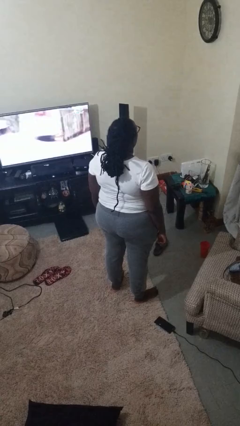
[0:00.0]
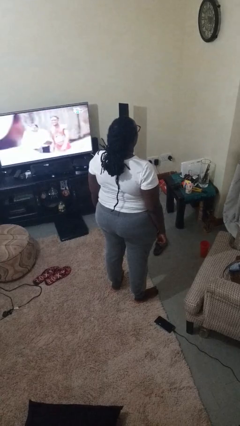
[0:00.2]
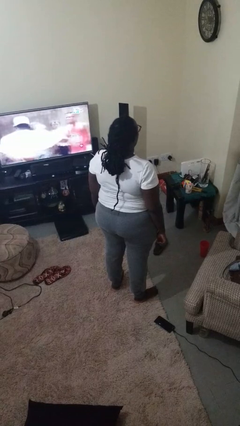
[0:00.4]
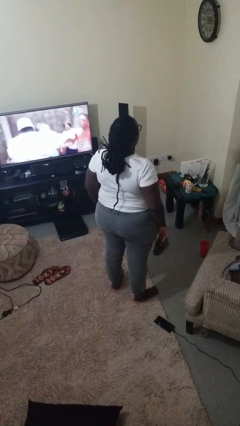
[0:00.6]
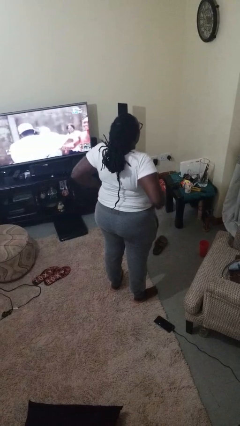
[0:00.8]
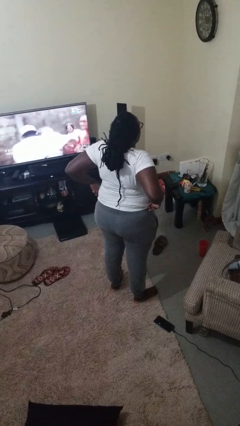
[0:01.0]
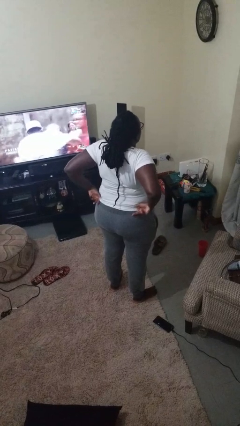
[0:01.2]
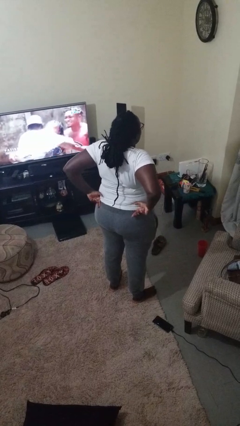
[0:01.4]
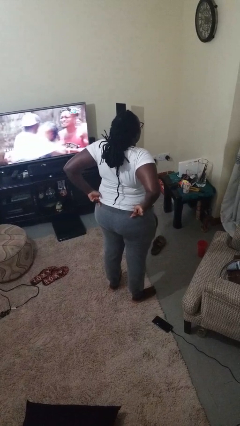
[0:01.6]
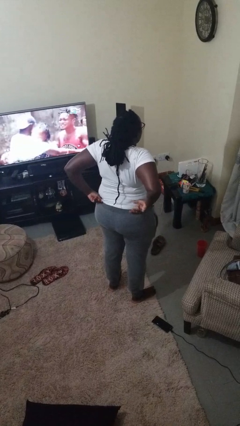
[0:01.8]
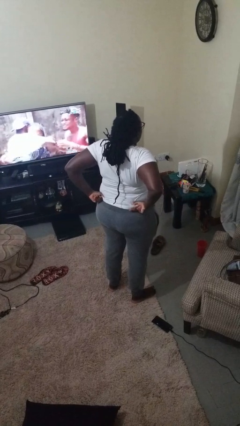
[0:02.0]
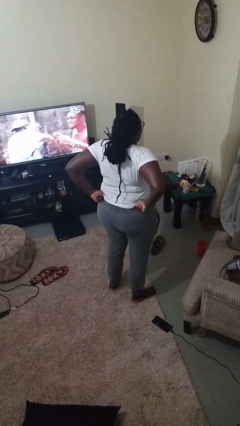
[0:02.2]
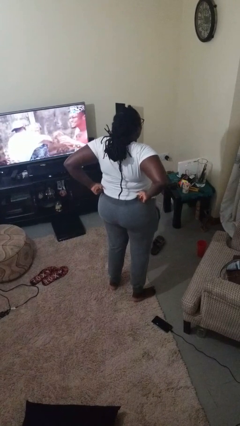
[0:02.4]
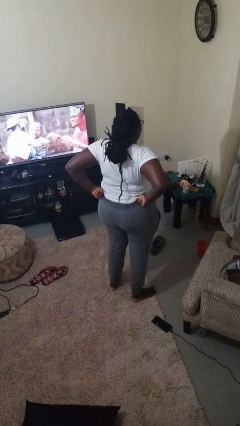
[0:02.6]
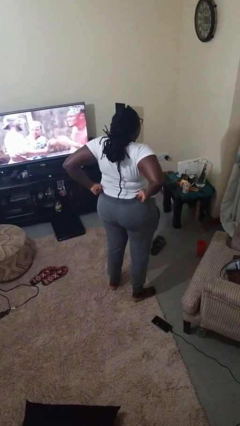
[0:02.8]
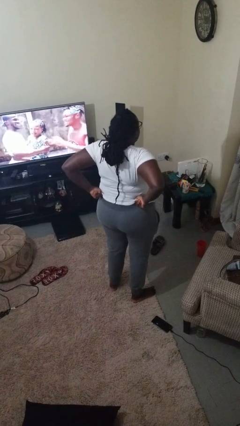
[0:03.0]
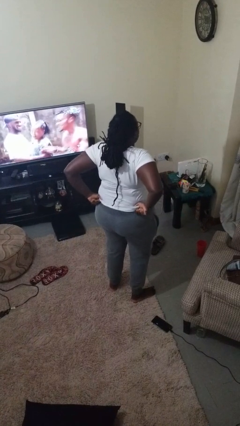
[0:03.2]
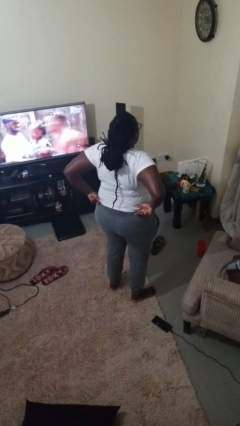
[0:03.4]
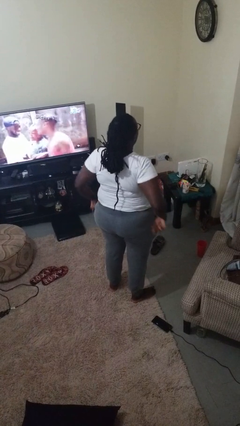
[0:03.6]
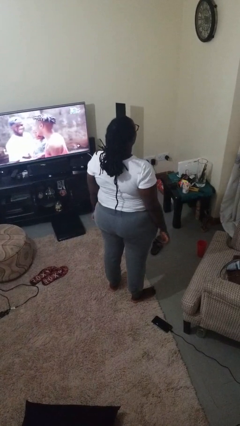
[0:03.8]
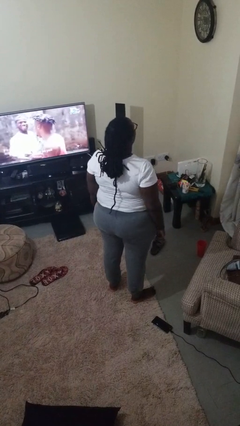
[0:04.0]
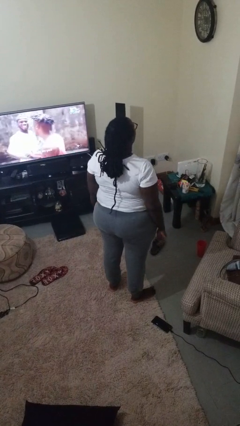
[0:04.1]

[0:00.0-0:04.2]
person hikes up pants

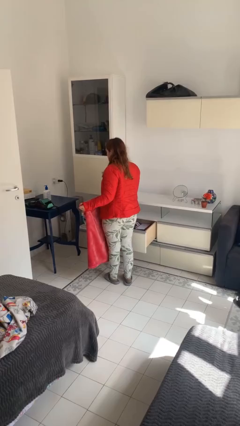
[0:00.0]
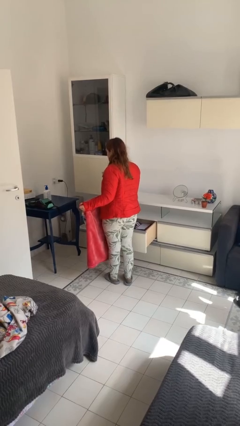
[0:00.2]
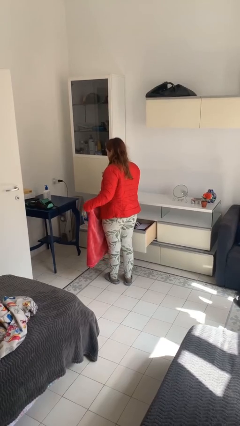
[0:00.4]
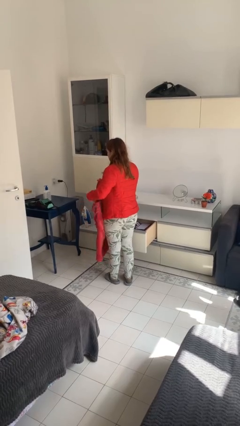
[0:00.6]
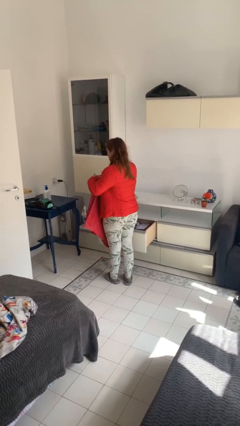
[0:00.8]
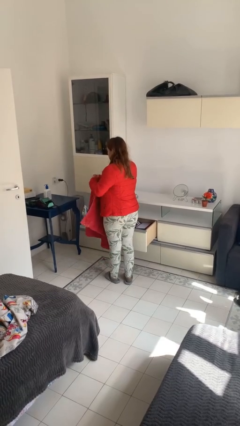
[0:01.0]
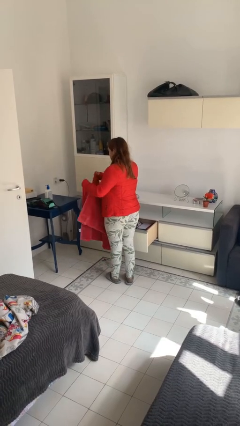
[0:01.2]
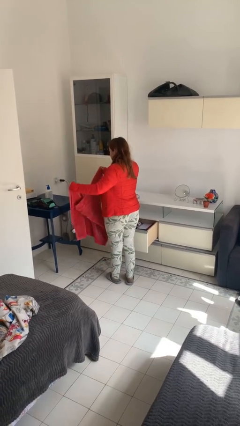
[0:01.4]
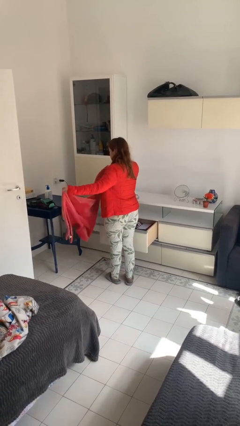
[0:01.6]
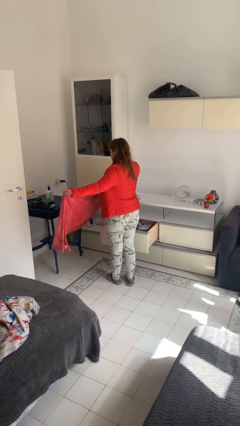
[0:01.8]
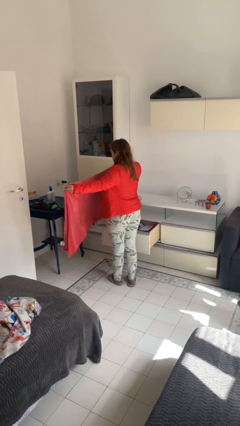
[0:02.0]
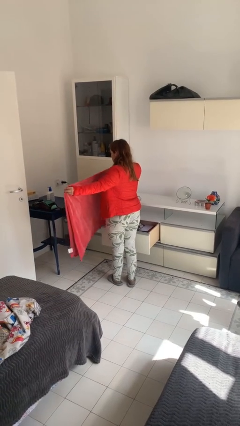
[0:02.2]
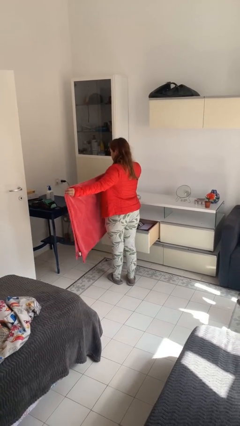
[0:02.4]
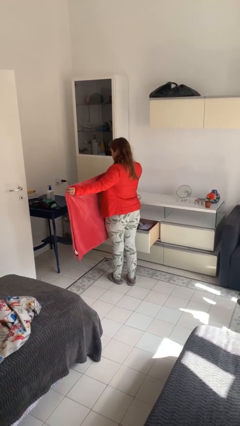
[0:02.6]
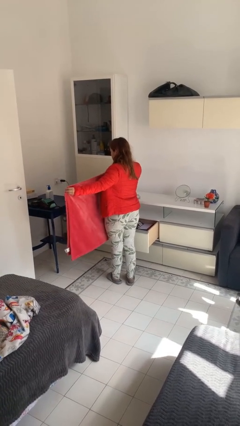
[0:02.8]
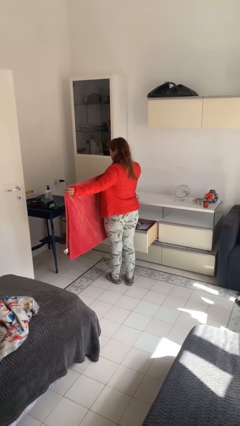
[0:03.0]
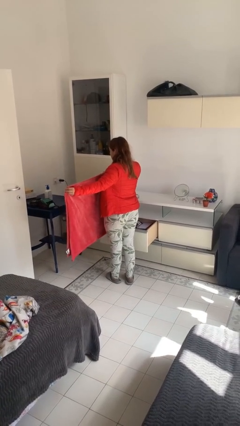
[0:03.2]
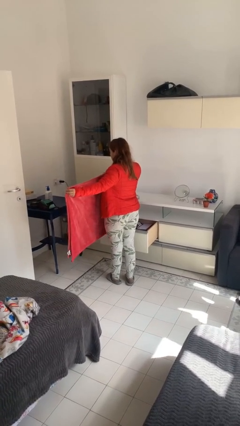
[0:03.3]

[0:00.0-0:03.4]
person folds blanket

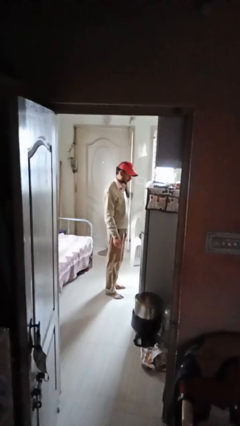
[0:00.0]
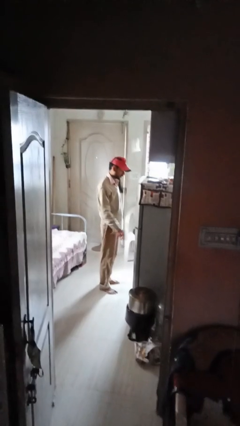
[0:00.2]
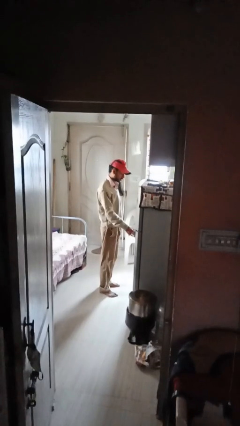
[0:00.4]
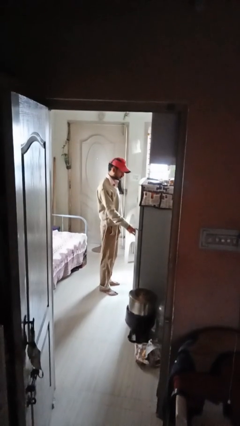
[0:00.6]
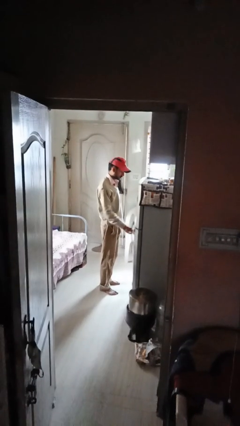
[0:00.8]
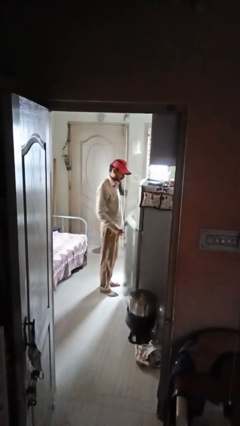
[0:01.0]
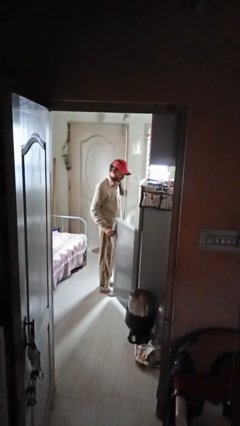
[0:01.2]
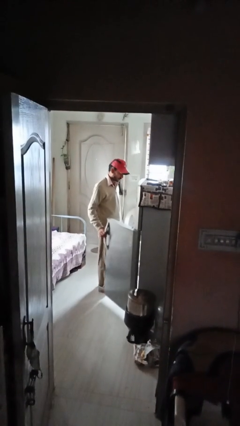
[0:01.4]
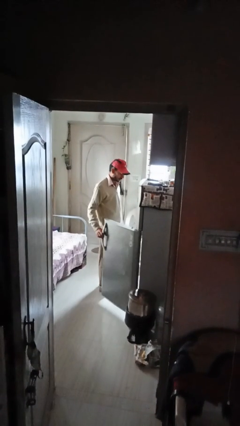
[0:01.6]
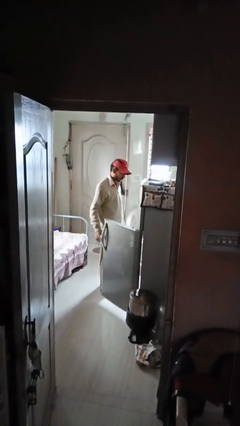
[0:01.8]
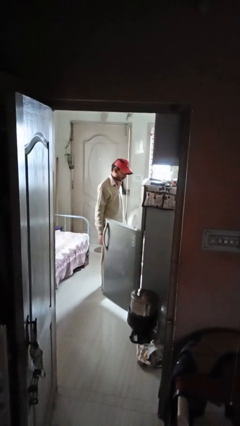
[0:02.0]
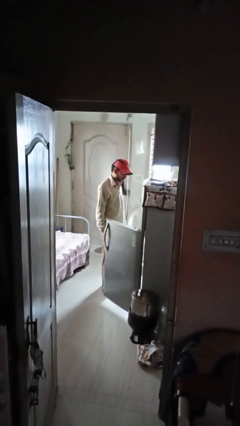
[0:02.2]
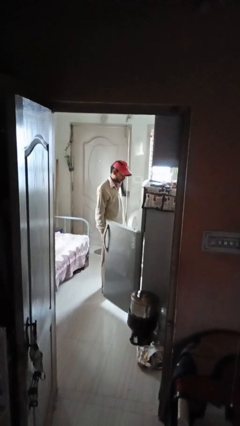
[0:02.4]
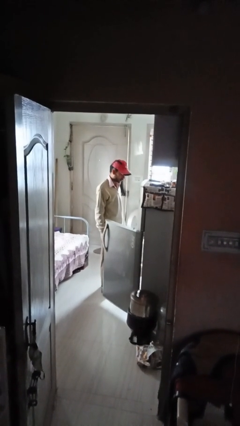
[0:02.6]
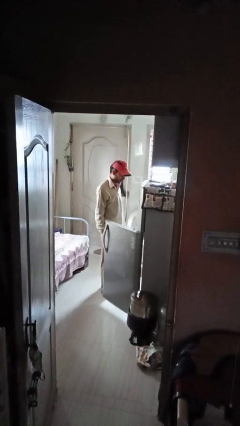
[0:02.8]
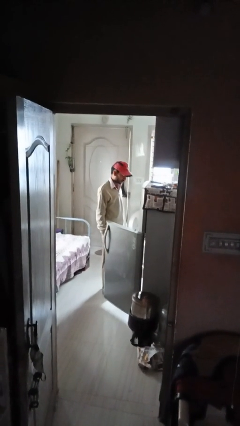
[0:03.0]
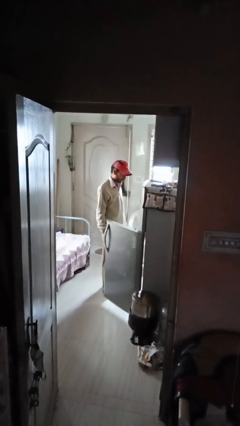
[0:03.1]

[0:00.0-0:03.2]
person opens refrigerator

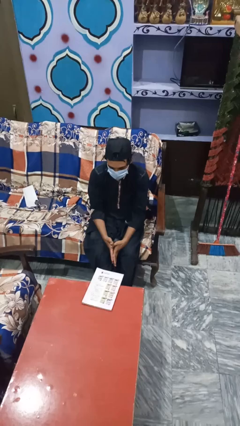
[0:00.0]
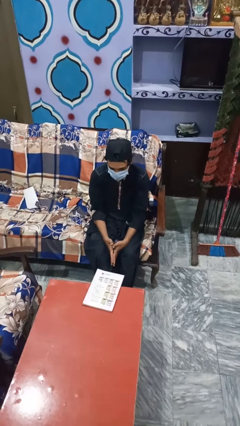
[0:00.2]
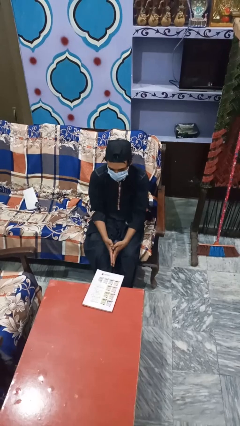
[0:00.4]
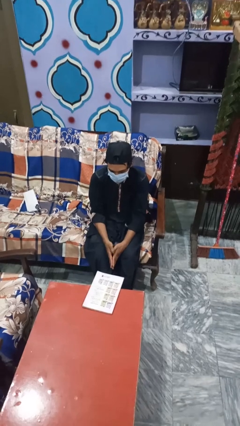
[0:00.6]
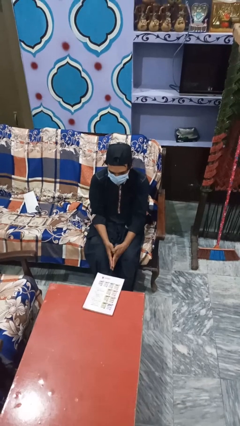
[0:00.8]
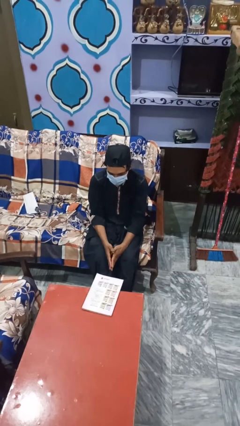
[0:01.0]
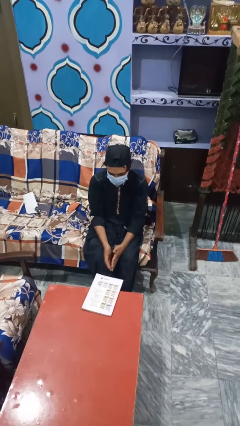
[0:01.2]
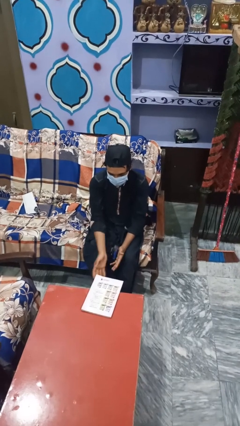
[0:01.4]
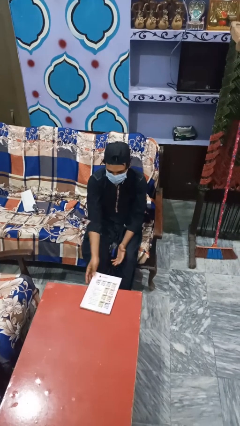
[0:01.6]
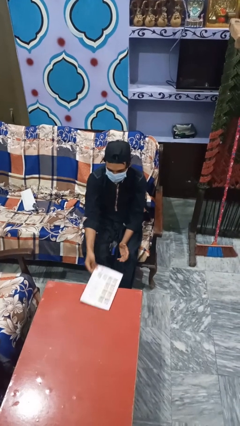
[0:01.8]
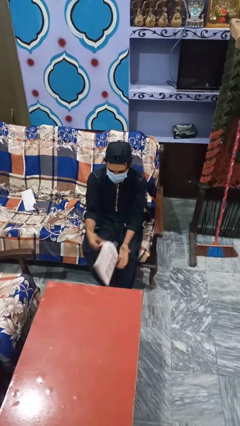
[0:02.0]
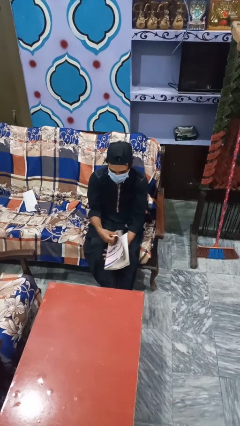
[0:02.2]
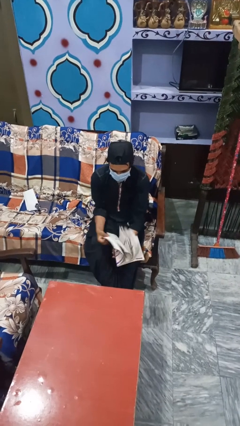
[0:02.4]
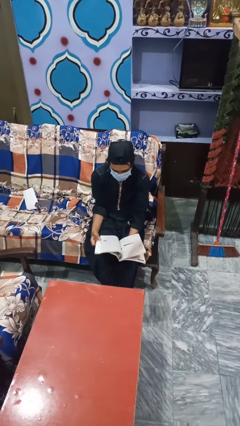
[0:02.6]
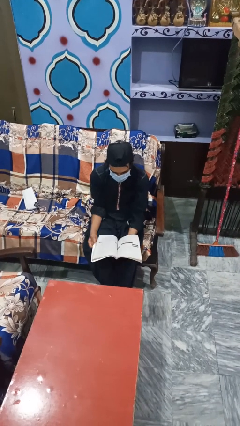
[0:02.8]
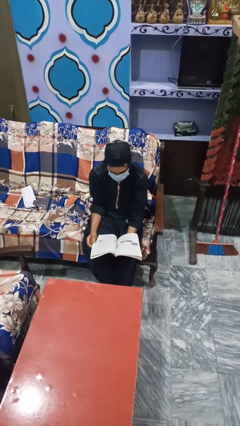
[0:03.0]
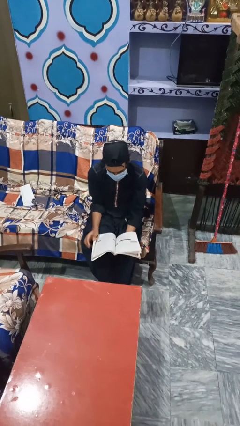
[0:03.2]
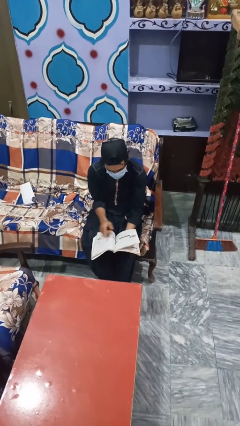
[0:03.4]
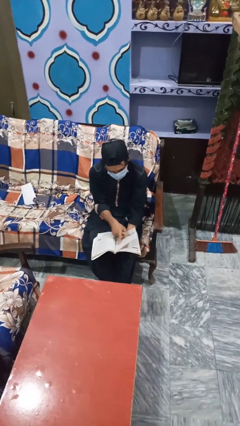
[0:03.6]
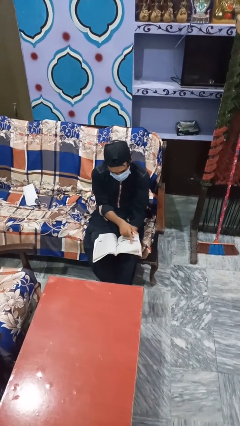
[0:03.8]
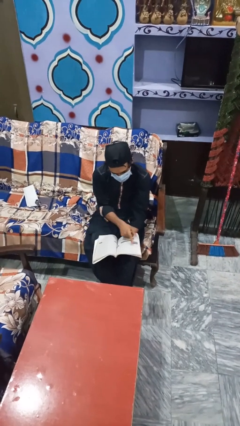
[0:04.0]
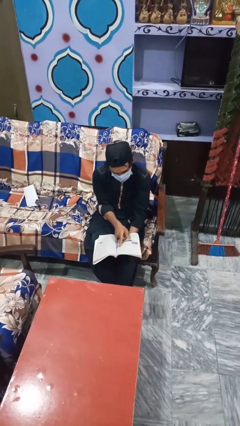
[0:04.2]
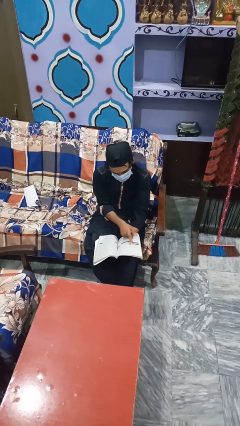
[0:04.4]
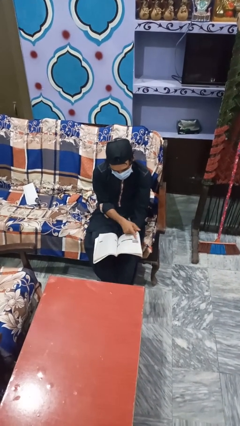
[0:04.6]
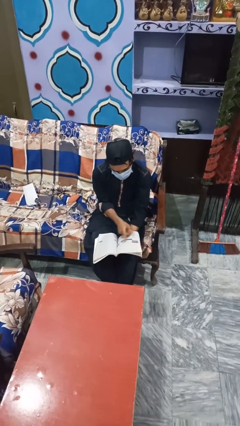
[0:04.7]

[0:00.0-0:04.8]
person reads magazine

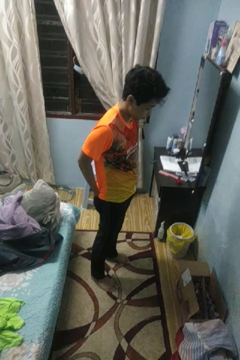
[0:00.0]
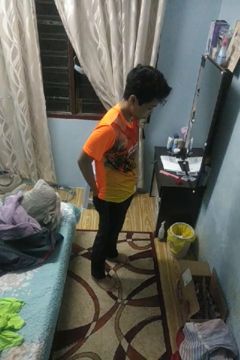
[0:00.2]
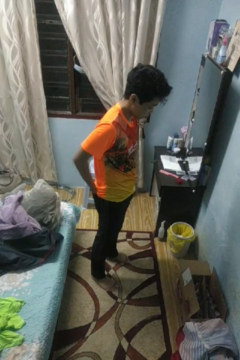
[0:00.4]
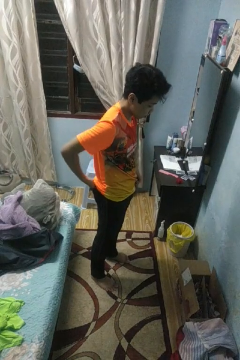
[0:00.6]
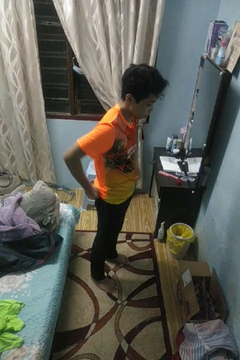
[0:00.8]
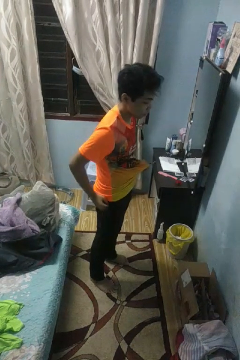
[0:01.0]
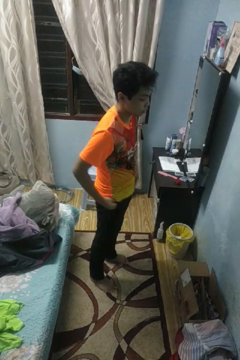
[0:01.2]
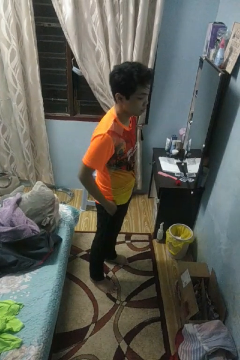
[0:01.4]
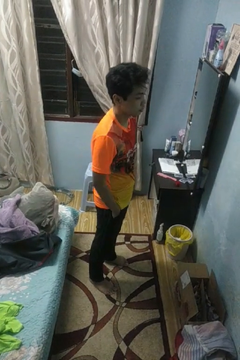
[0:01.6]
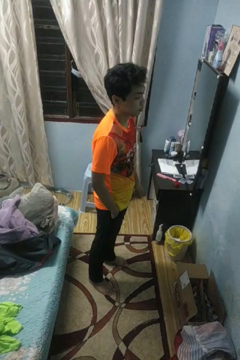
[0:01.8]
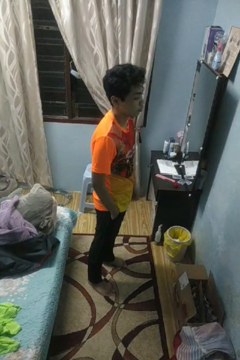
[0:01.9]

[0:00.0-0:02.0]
person puts hands in back pockets

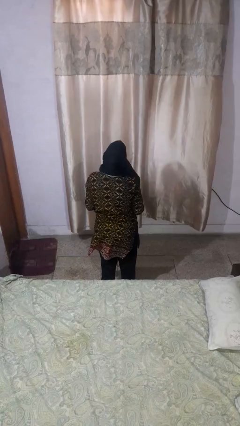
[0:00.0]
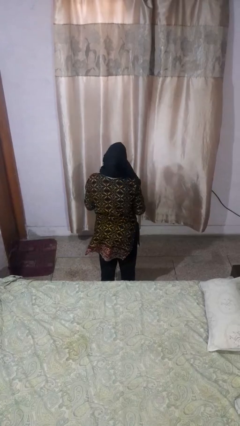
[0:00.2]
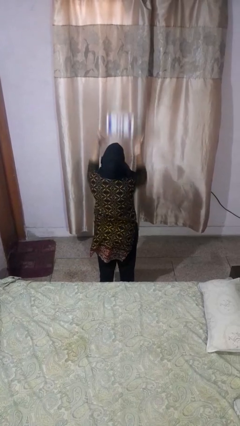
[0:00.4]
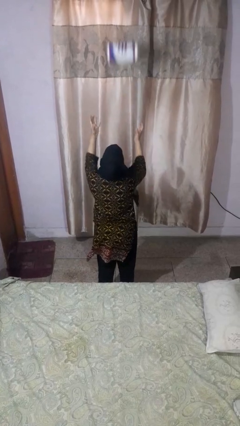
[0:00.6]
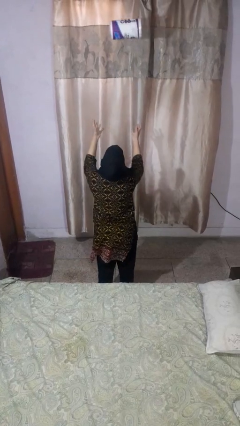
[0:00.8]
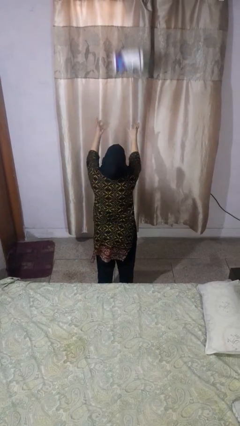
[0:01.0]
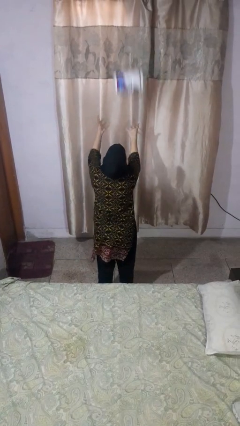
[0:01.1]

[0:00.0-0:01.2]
person drops object
